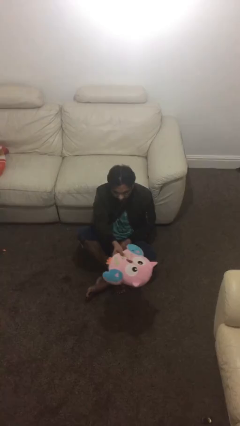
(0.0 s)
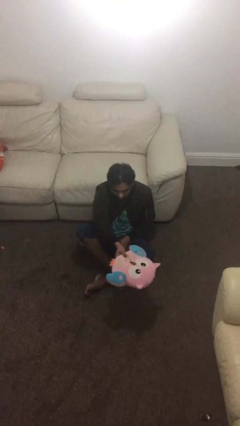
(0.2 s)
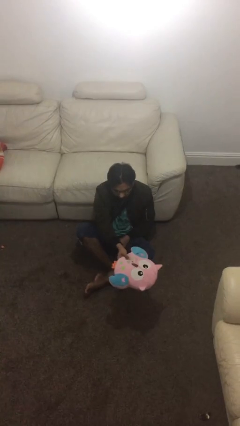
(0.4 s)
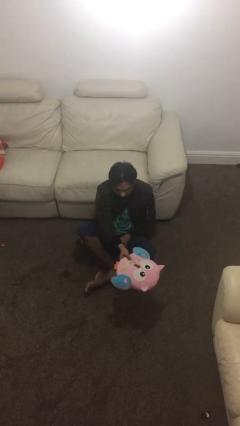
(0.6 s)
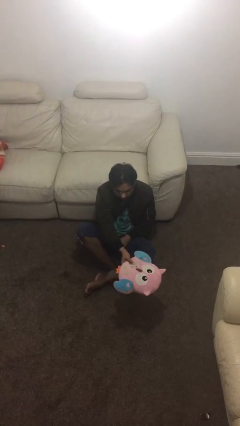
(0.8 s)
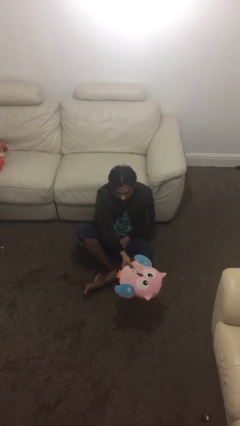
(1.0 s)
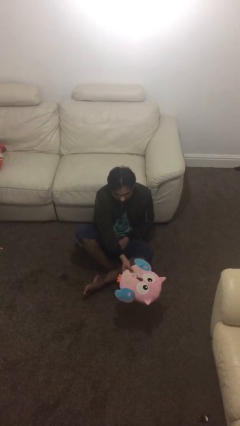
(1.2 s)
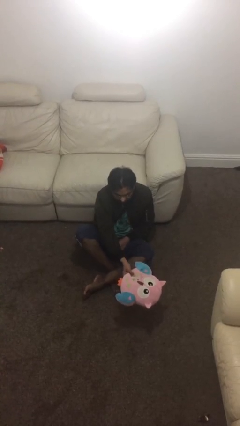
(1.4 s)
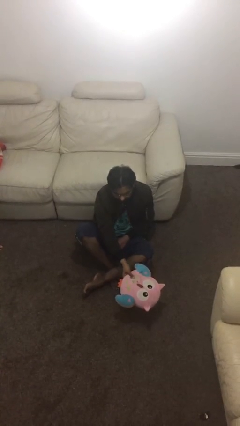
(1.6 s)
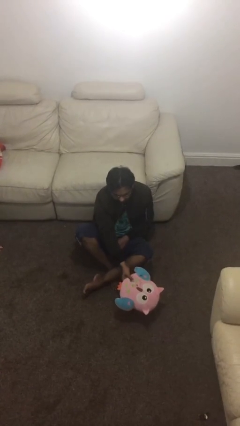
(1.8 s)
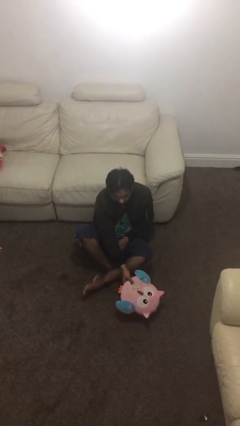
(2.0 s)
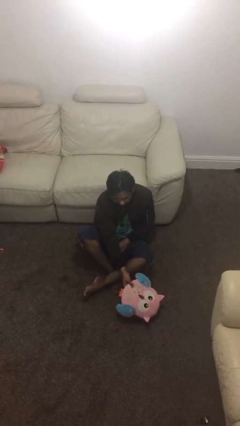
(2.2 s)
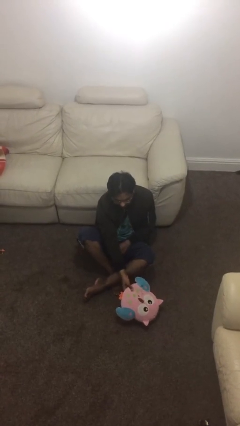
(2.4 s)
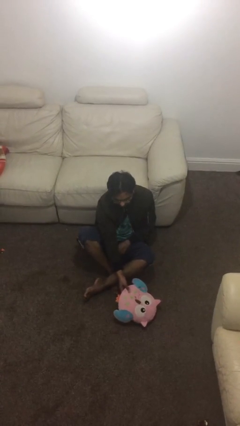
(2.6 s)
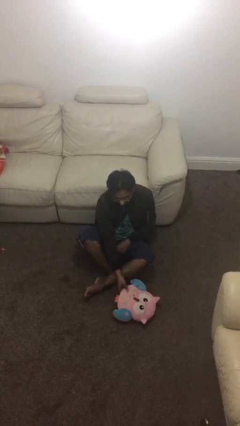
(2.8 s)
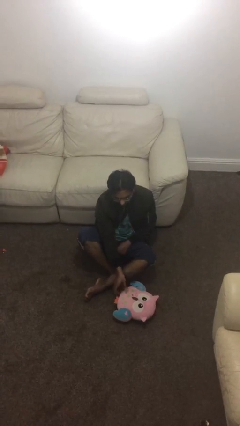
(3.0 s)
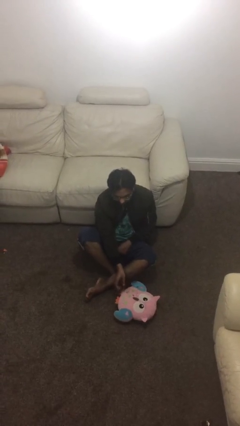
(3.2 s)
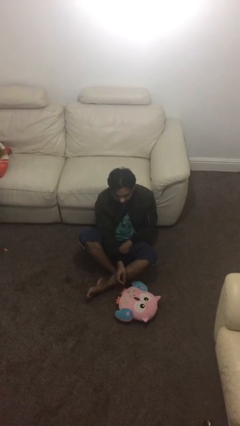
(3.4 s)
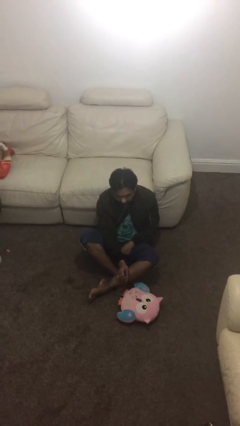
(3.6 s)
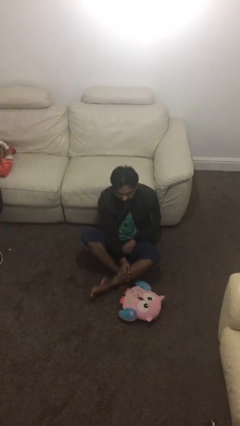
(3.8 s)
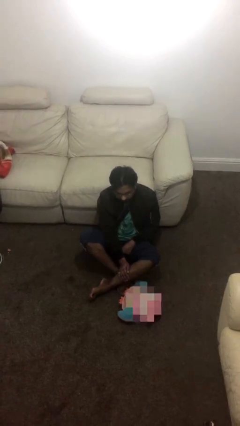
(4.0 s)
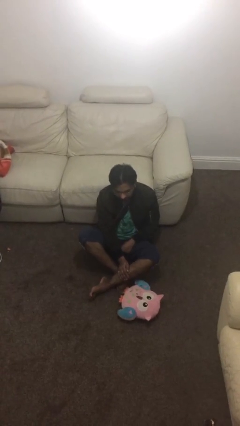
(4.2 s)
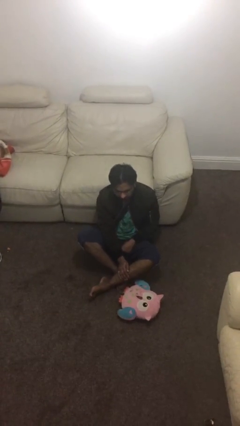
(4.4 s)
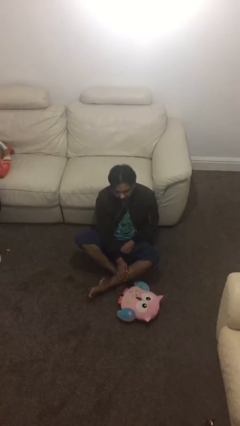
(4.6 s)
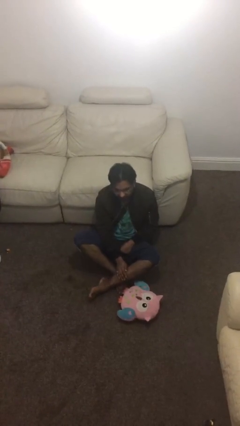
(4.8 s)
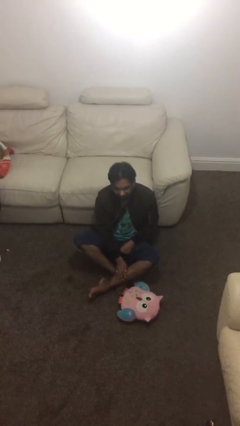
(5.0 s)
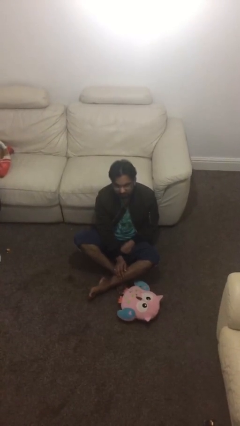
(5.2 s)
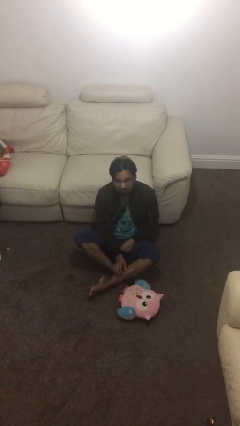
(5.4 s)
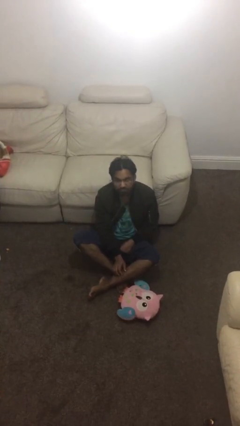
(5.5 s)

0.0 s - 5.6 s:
person puts down object on floor

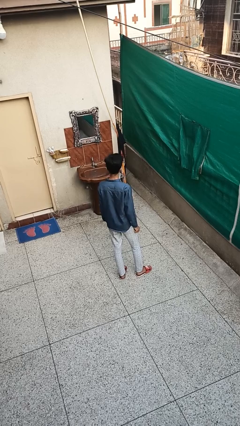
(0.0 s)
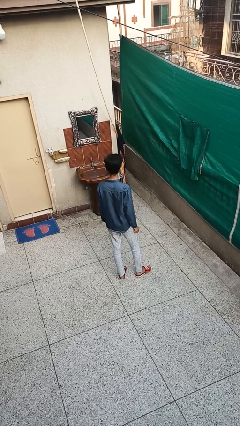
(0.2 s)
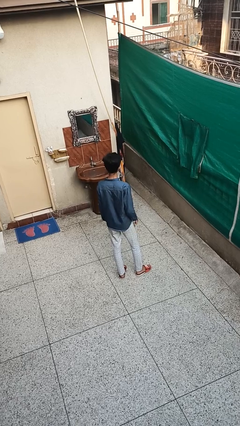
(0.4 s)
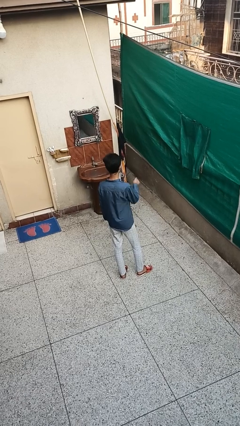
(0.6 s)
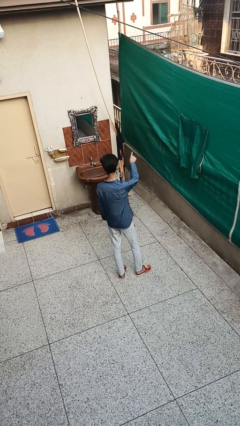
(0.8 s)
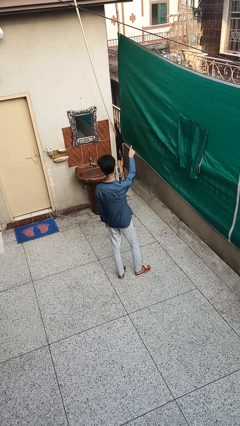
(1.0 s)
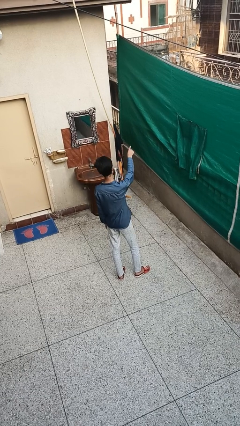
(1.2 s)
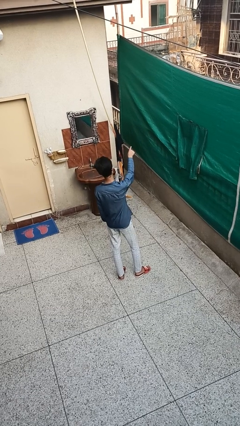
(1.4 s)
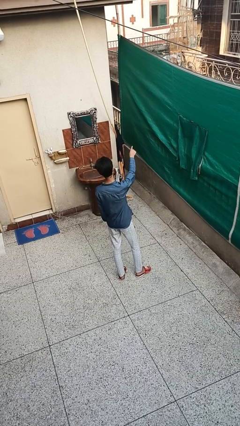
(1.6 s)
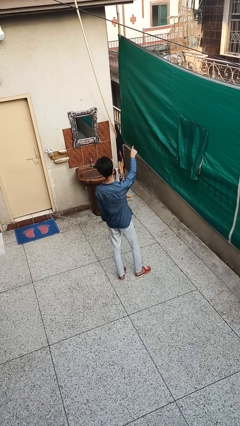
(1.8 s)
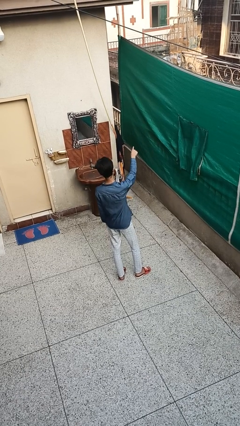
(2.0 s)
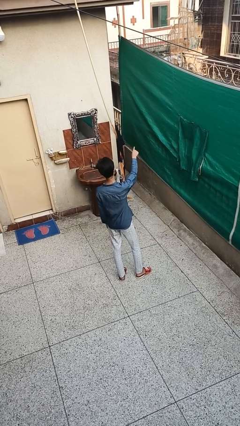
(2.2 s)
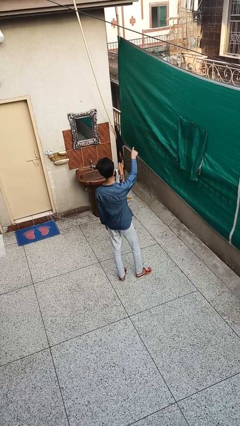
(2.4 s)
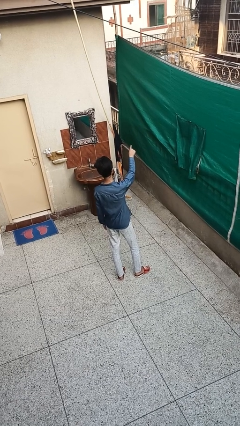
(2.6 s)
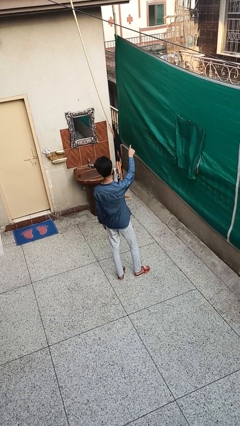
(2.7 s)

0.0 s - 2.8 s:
person points at person

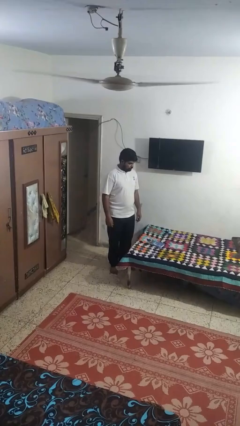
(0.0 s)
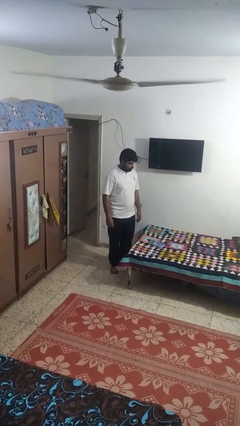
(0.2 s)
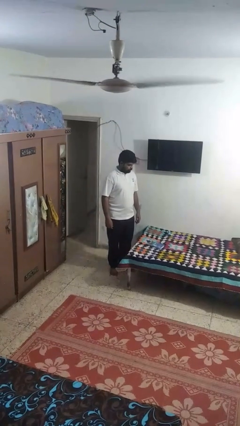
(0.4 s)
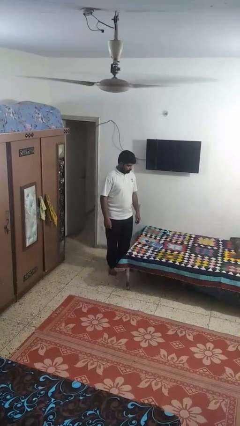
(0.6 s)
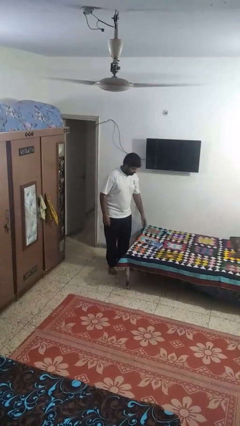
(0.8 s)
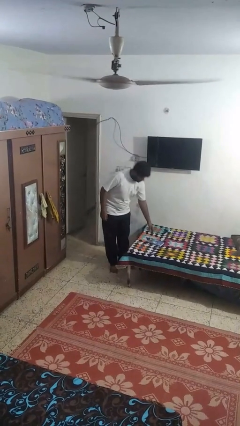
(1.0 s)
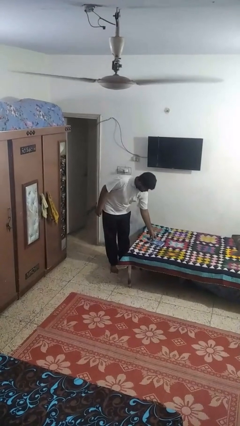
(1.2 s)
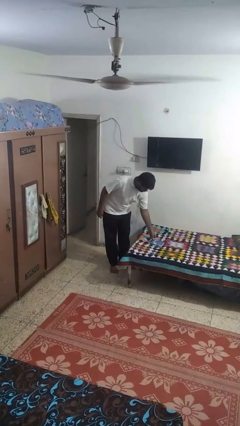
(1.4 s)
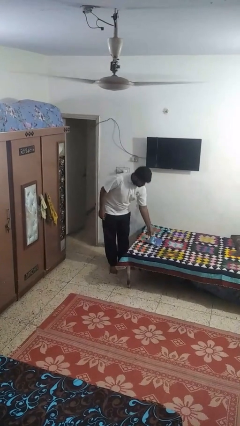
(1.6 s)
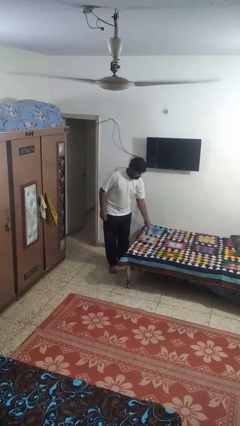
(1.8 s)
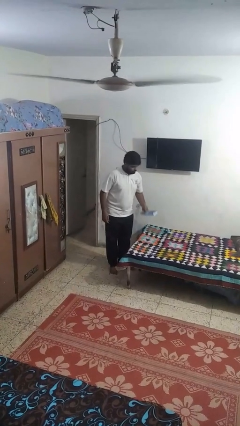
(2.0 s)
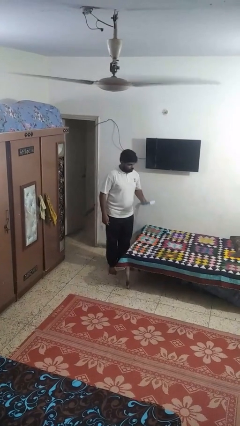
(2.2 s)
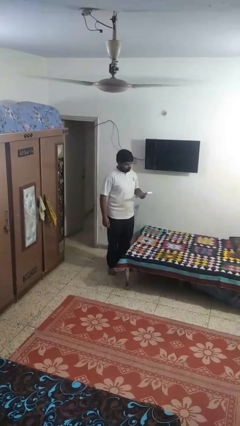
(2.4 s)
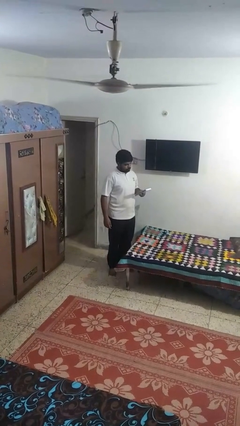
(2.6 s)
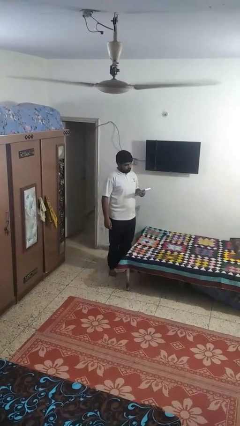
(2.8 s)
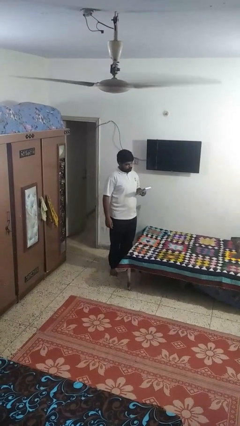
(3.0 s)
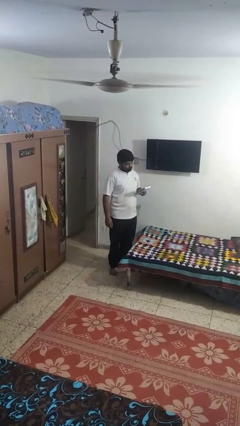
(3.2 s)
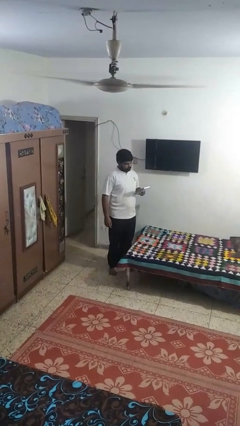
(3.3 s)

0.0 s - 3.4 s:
person picks up object from bed

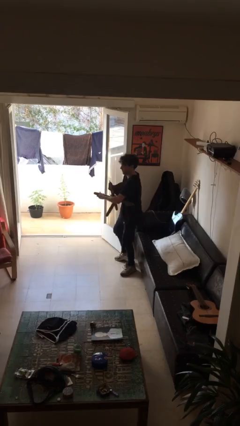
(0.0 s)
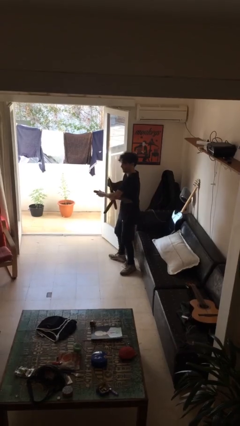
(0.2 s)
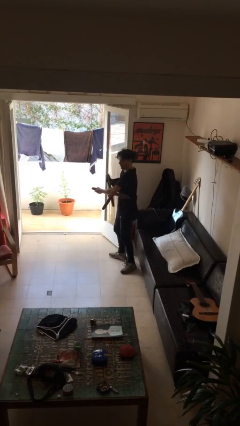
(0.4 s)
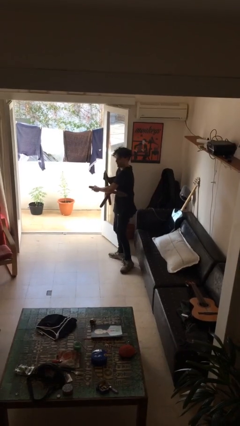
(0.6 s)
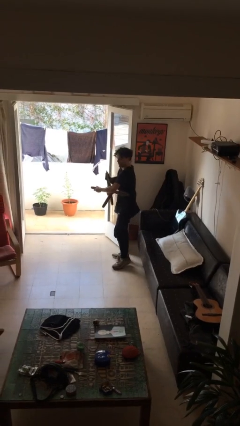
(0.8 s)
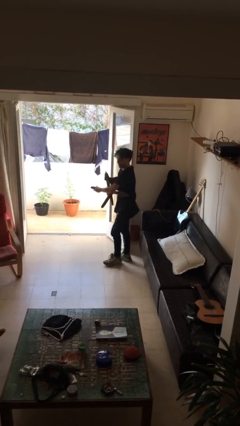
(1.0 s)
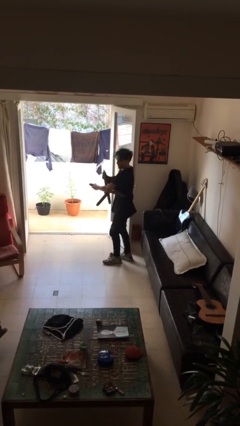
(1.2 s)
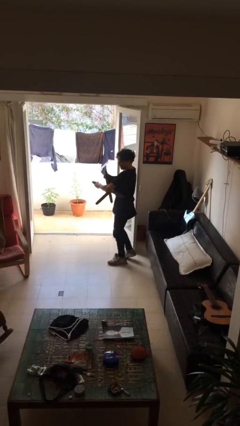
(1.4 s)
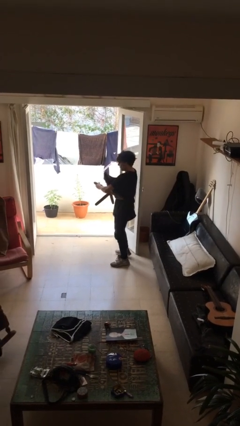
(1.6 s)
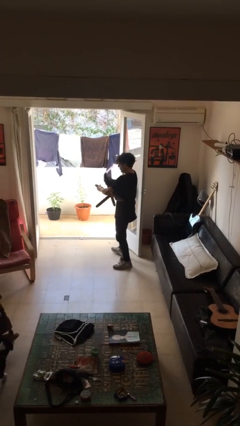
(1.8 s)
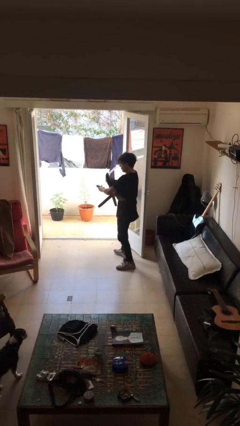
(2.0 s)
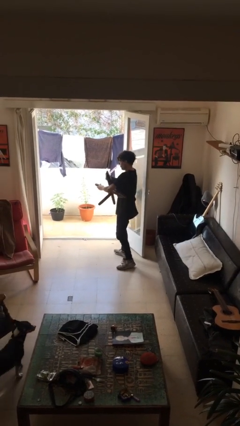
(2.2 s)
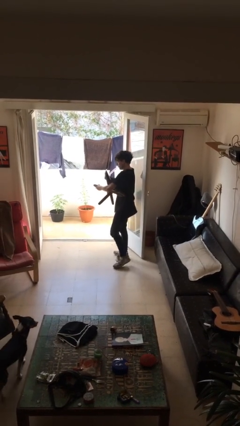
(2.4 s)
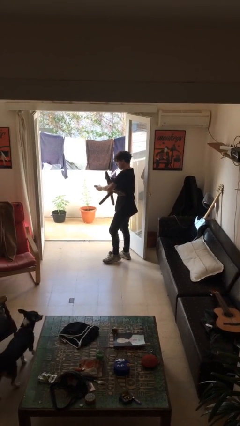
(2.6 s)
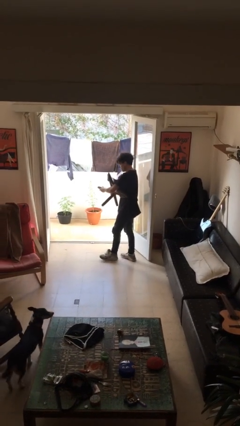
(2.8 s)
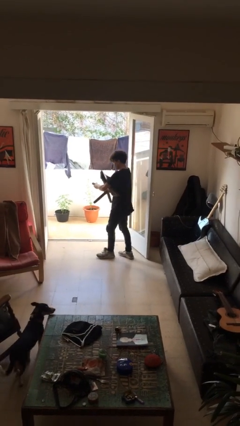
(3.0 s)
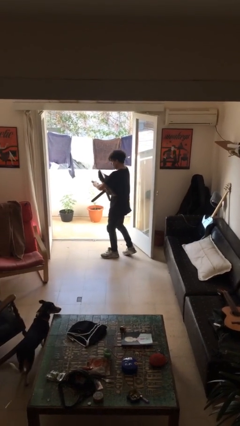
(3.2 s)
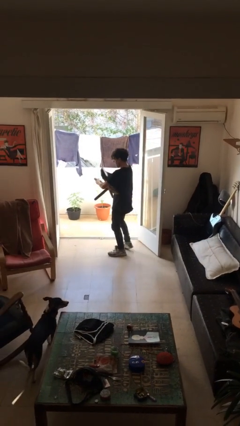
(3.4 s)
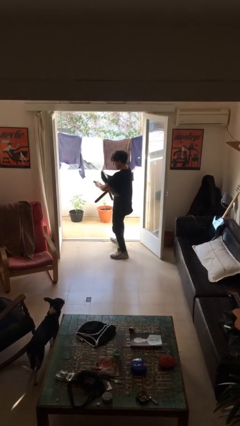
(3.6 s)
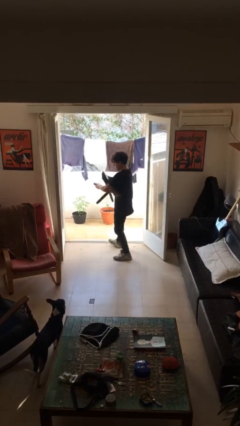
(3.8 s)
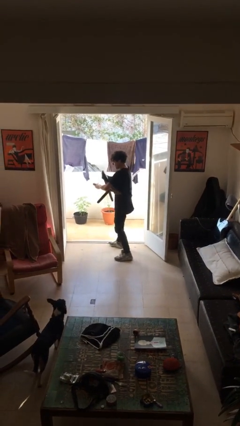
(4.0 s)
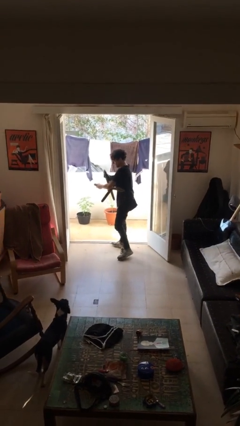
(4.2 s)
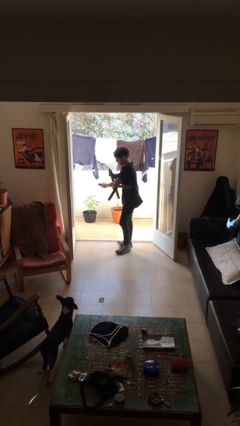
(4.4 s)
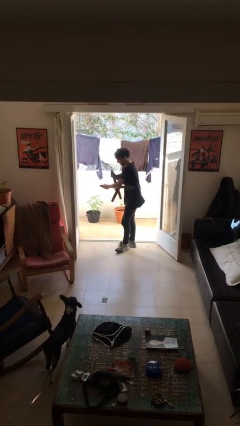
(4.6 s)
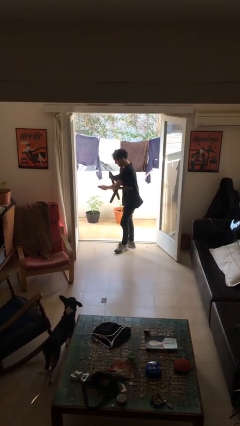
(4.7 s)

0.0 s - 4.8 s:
person carries heavy object

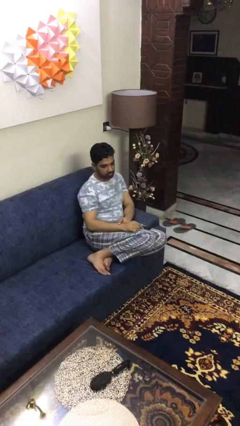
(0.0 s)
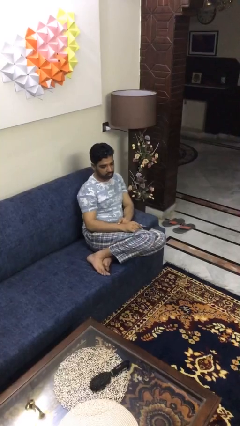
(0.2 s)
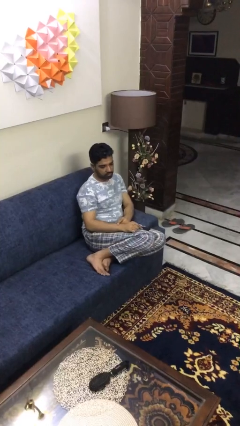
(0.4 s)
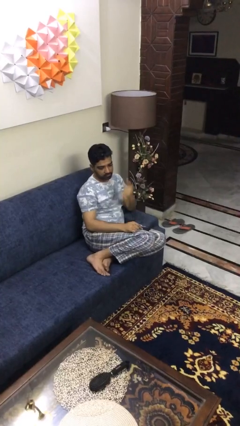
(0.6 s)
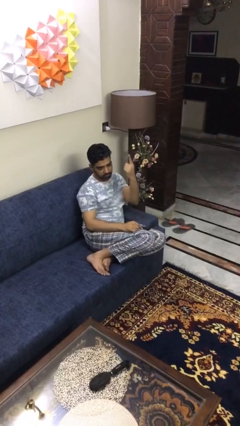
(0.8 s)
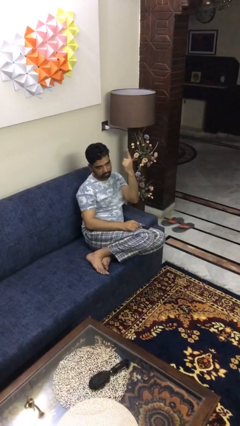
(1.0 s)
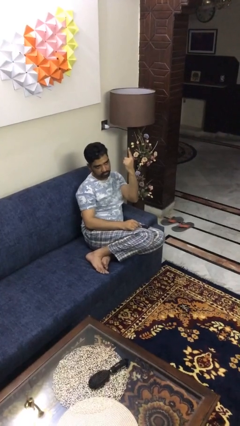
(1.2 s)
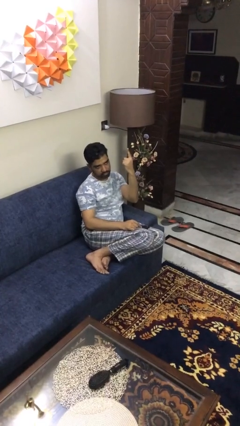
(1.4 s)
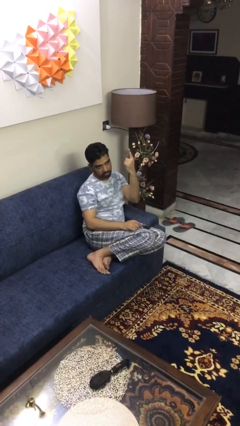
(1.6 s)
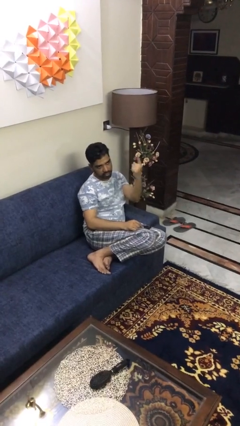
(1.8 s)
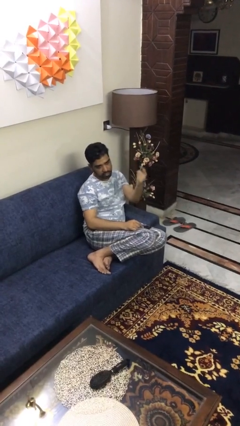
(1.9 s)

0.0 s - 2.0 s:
person gestures number one
